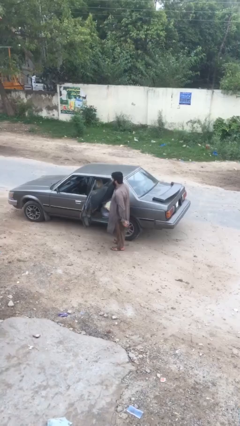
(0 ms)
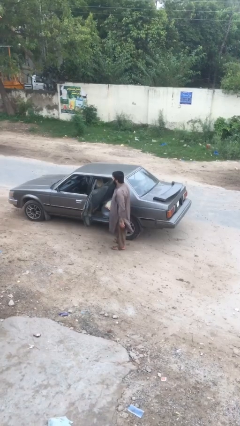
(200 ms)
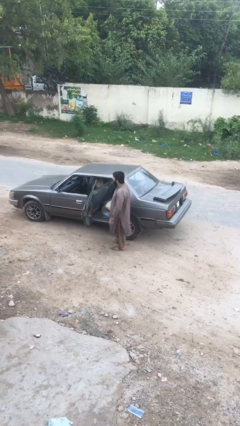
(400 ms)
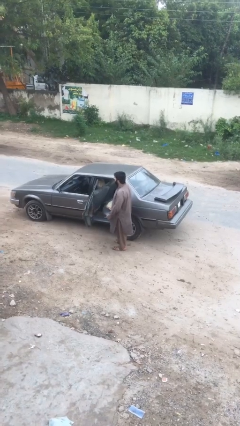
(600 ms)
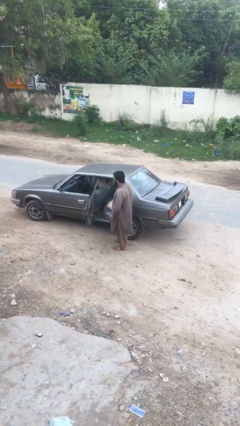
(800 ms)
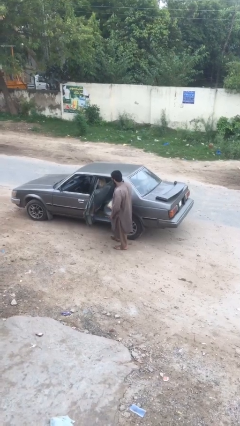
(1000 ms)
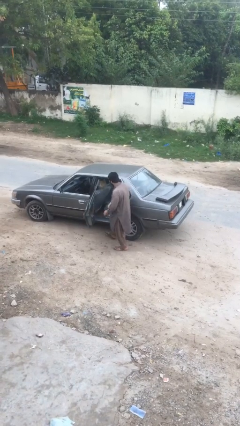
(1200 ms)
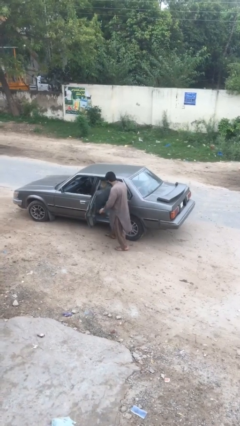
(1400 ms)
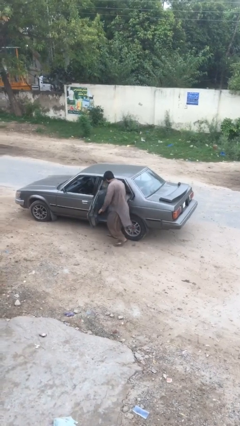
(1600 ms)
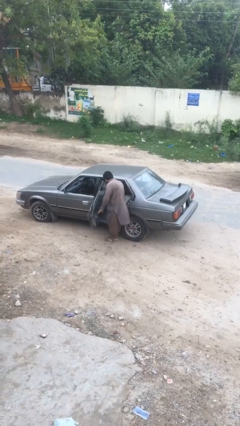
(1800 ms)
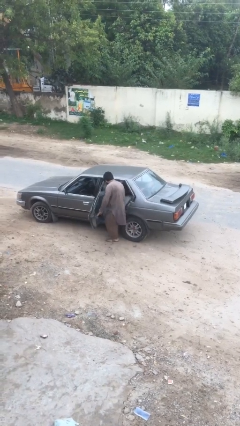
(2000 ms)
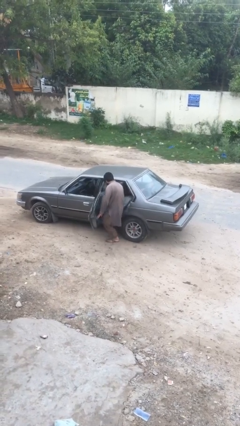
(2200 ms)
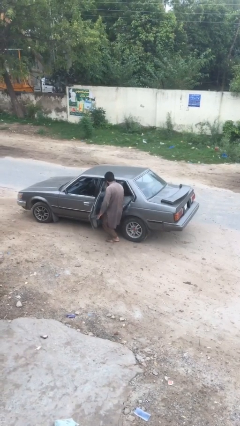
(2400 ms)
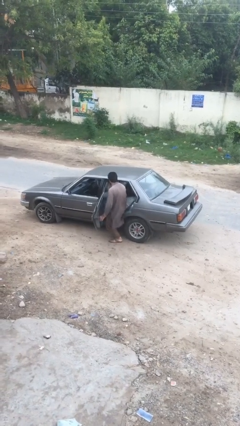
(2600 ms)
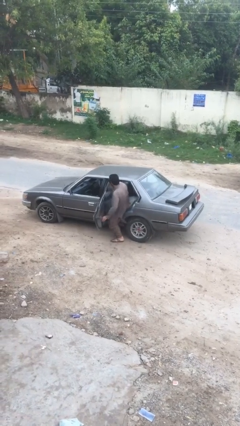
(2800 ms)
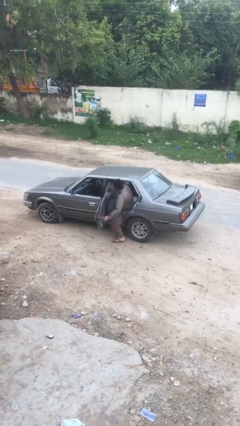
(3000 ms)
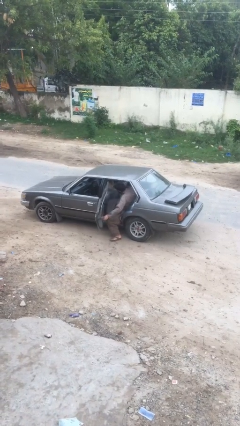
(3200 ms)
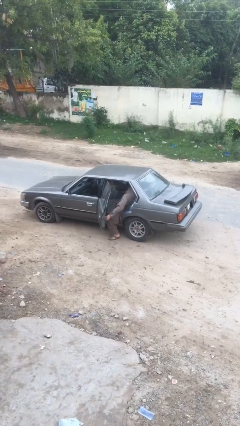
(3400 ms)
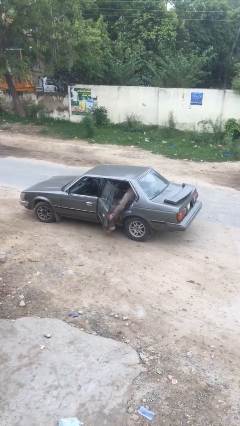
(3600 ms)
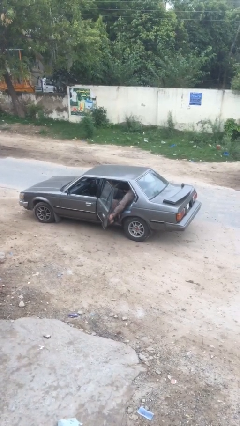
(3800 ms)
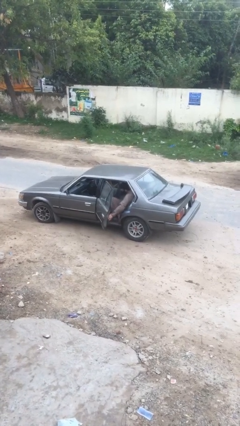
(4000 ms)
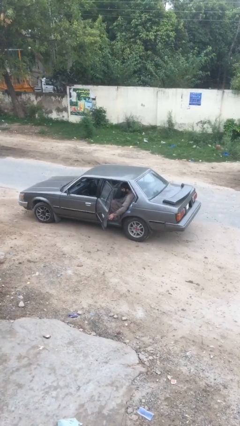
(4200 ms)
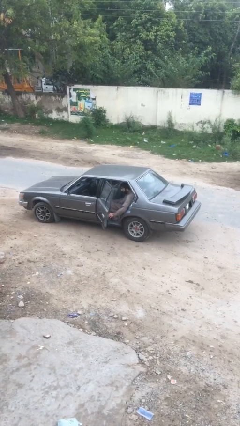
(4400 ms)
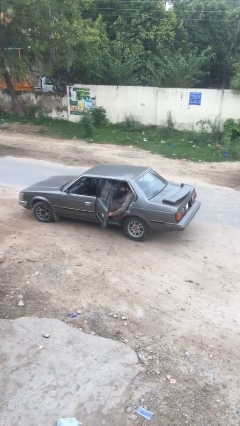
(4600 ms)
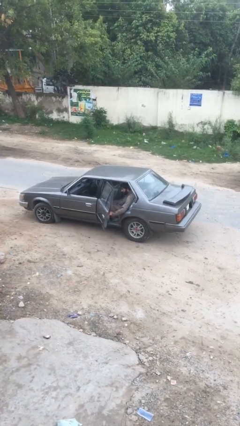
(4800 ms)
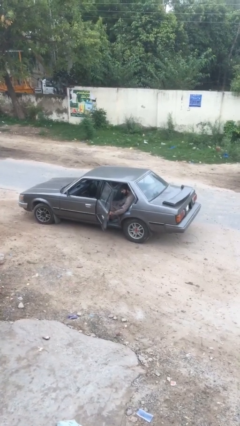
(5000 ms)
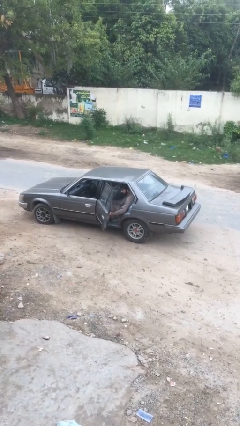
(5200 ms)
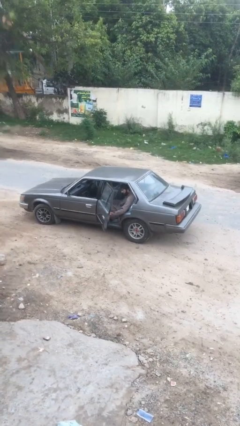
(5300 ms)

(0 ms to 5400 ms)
person enters car

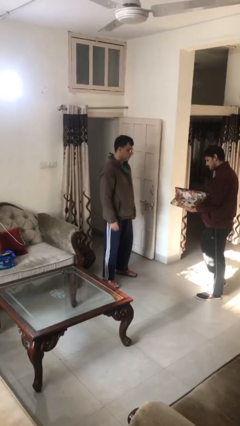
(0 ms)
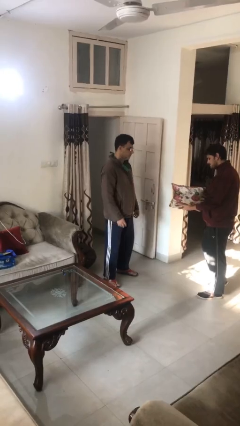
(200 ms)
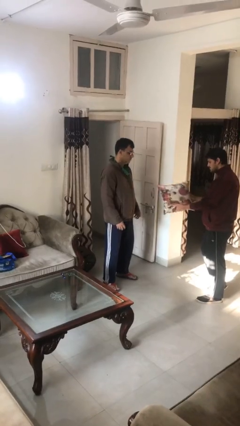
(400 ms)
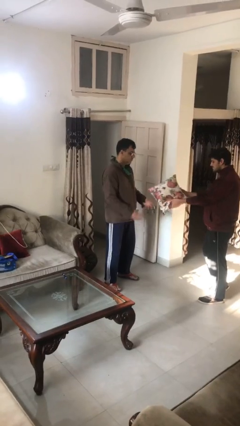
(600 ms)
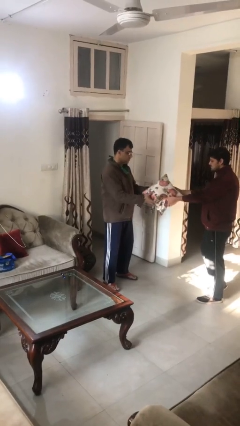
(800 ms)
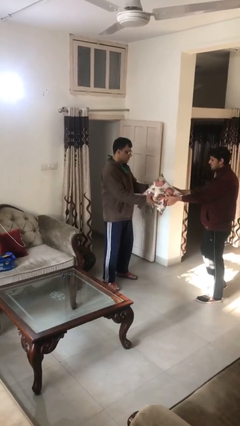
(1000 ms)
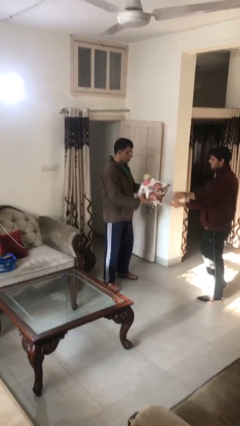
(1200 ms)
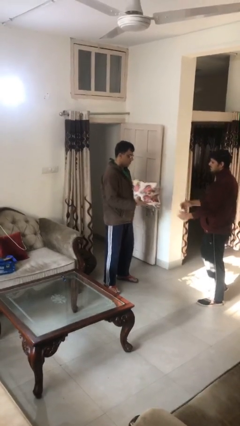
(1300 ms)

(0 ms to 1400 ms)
person transfers object to person

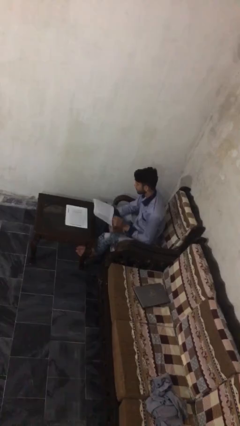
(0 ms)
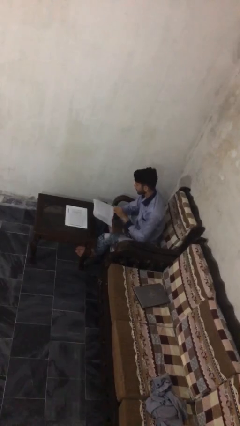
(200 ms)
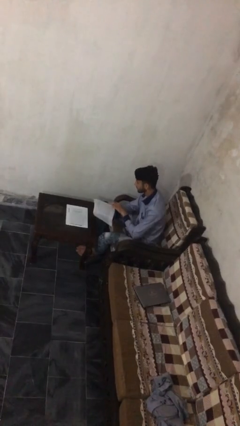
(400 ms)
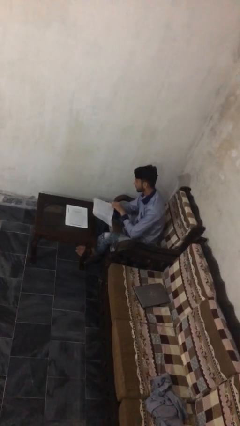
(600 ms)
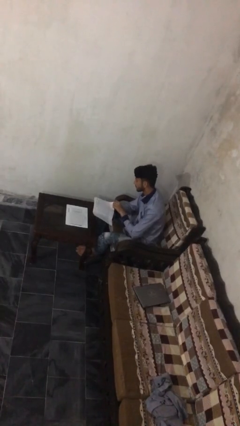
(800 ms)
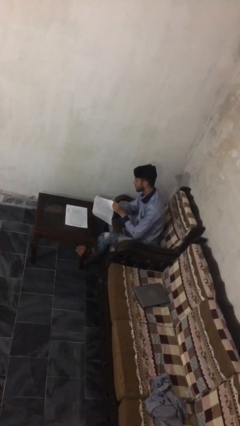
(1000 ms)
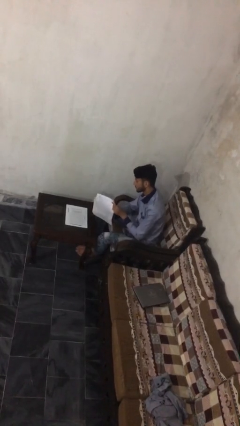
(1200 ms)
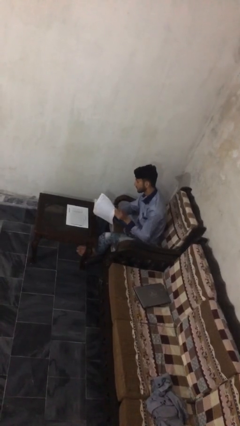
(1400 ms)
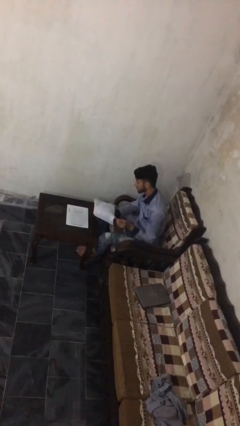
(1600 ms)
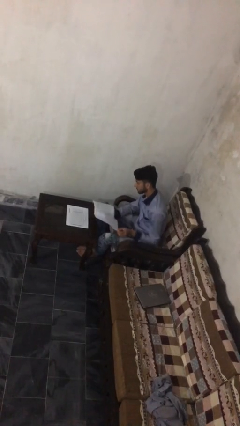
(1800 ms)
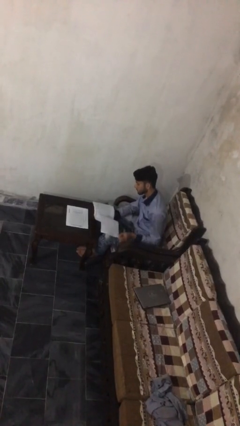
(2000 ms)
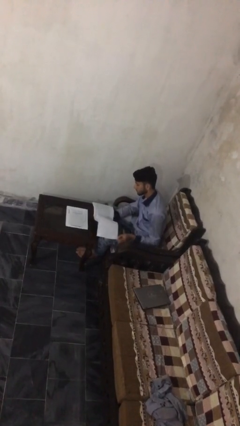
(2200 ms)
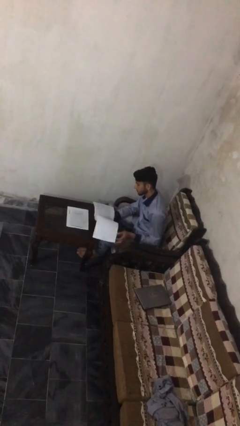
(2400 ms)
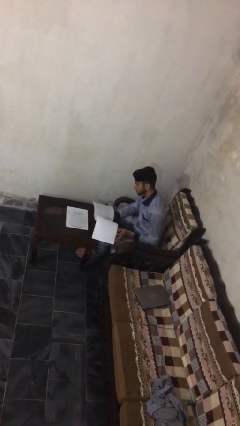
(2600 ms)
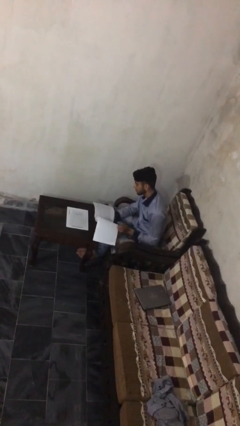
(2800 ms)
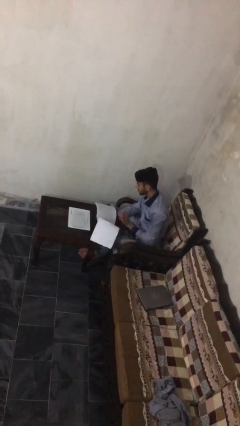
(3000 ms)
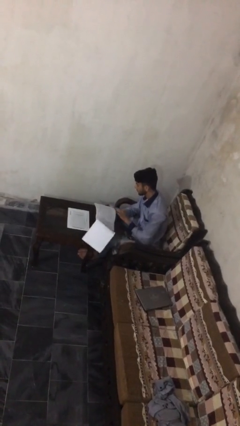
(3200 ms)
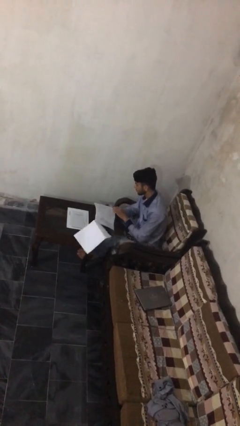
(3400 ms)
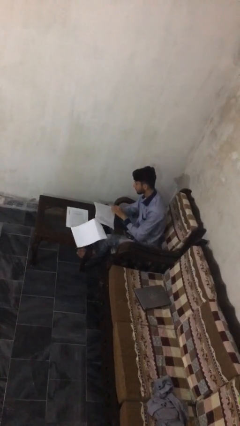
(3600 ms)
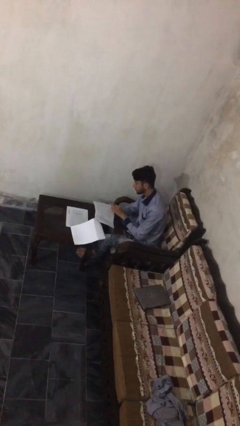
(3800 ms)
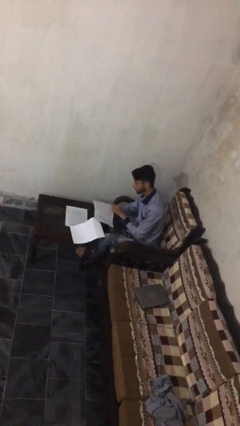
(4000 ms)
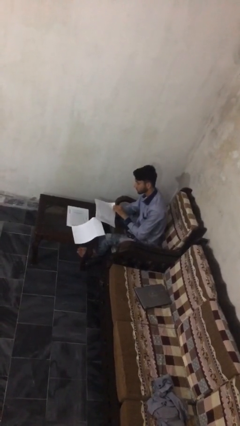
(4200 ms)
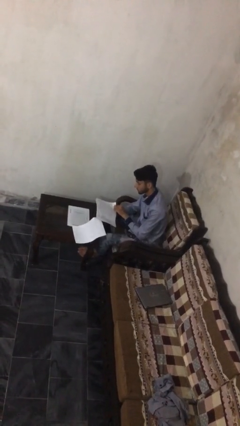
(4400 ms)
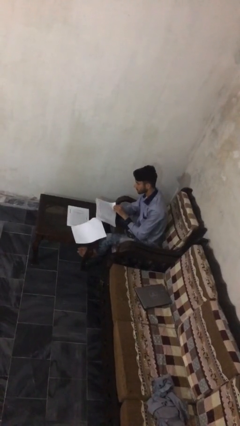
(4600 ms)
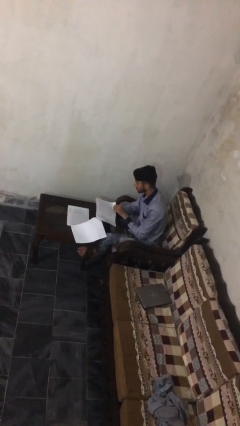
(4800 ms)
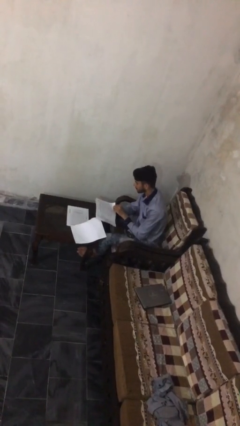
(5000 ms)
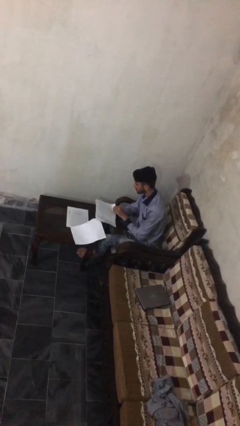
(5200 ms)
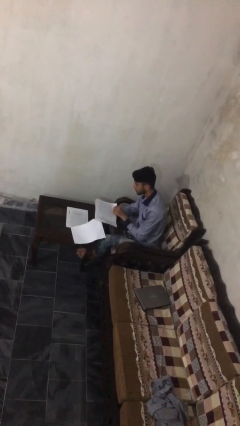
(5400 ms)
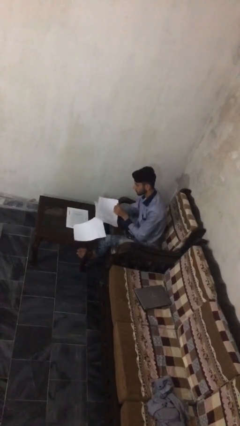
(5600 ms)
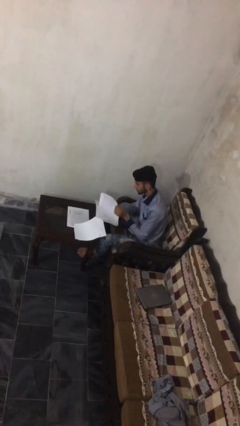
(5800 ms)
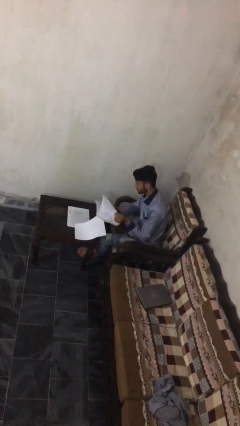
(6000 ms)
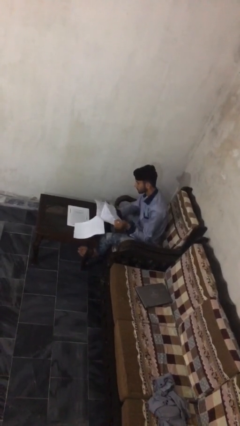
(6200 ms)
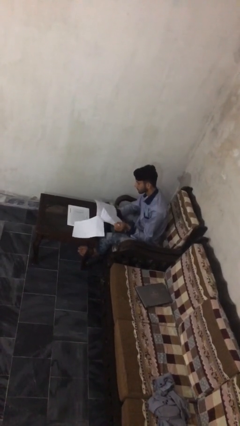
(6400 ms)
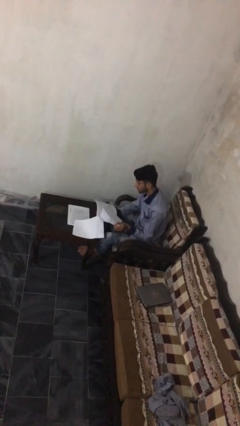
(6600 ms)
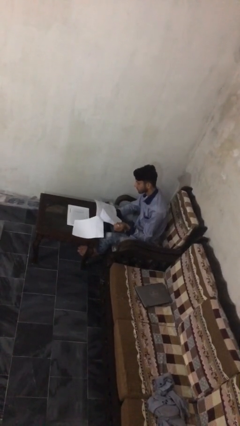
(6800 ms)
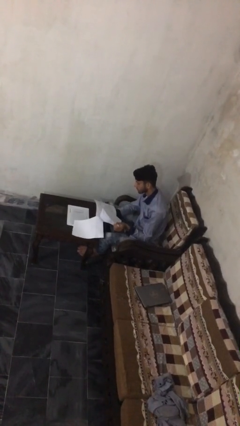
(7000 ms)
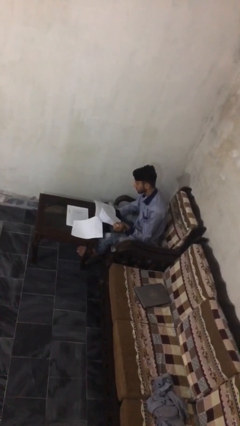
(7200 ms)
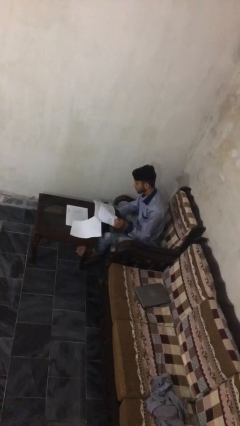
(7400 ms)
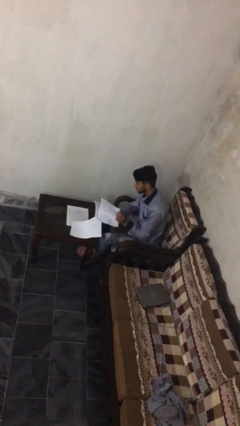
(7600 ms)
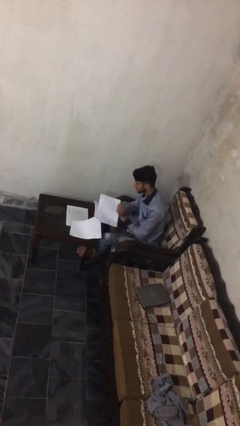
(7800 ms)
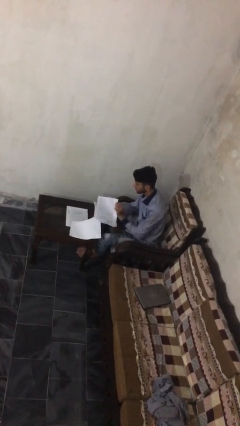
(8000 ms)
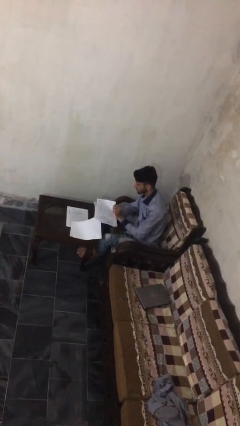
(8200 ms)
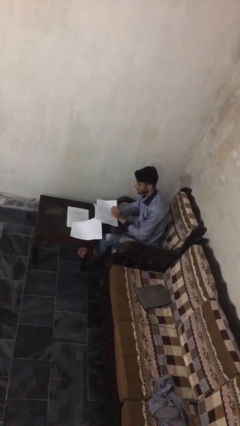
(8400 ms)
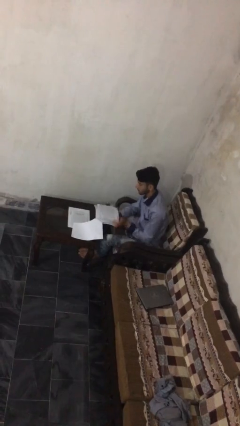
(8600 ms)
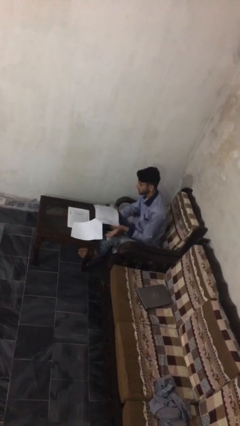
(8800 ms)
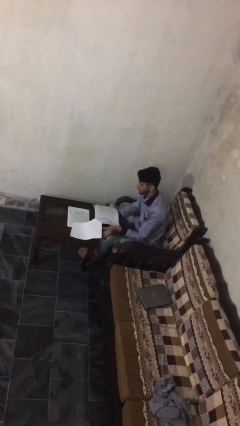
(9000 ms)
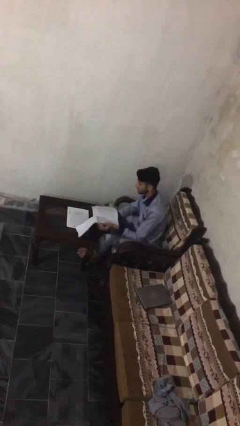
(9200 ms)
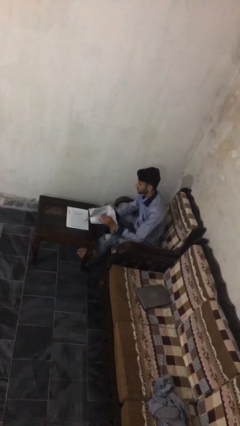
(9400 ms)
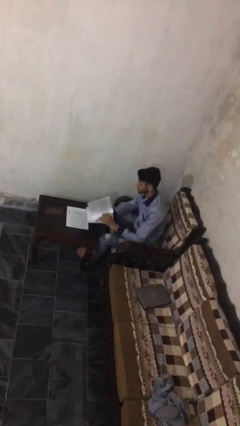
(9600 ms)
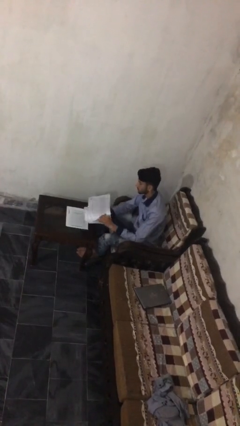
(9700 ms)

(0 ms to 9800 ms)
person reads document

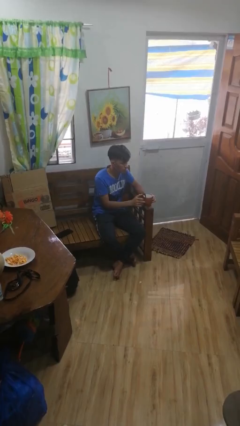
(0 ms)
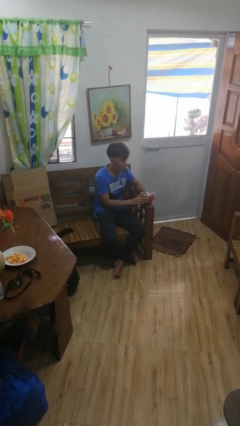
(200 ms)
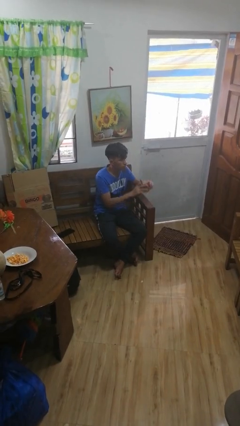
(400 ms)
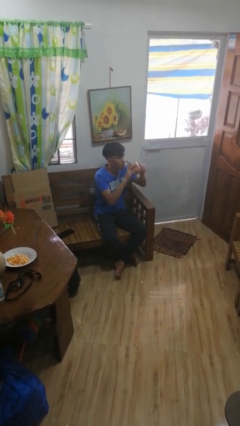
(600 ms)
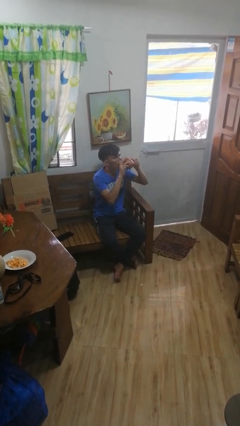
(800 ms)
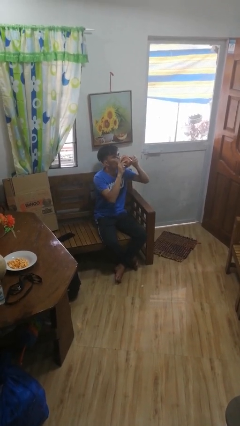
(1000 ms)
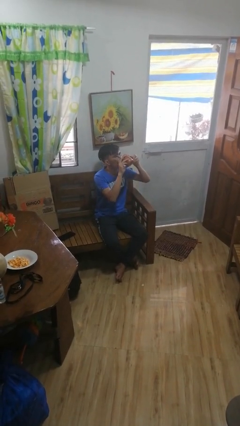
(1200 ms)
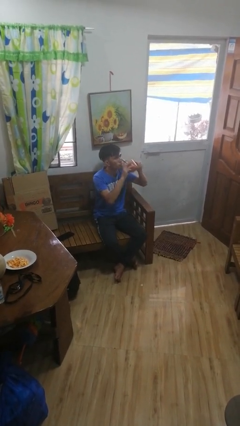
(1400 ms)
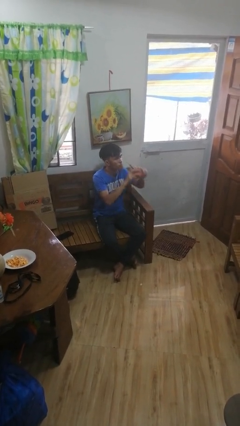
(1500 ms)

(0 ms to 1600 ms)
person drinks from mug
